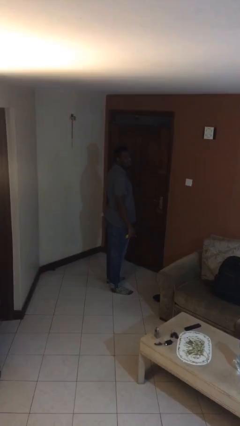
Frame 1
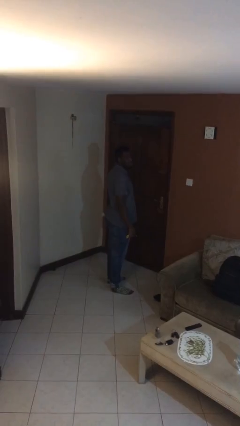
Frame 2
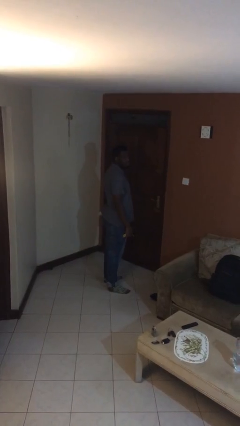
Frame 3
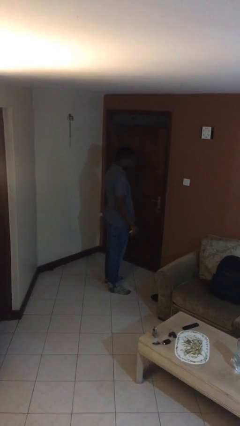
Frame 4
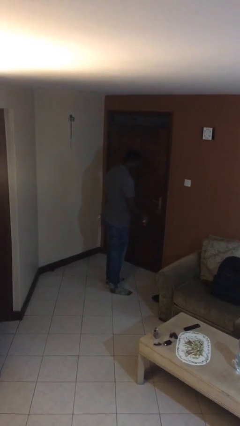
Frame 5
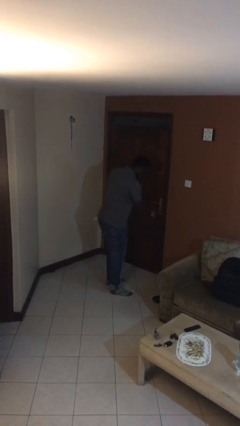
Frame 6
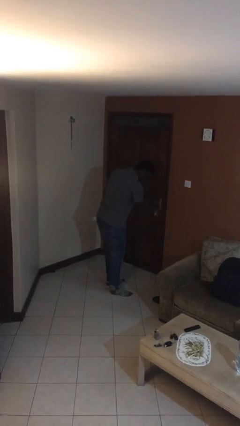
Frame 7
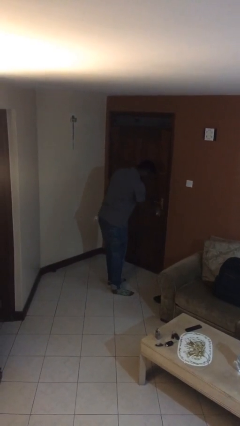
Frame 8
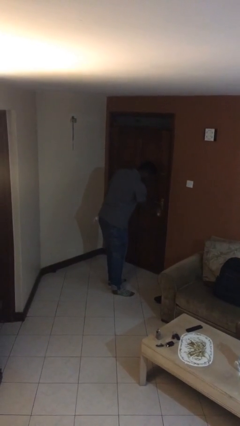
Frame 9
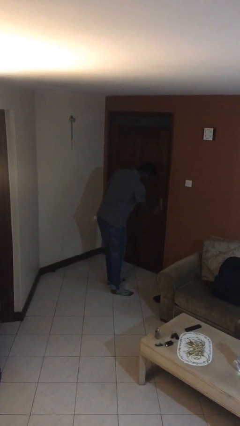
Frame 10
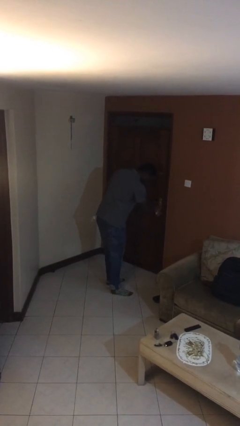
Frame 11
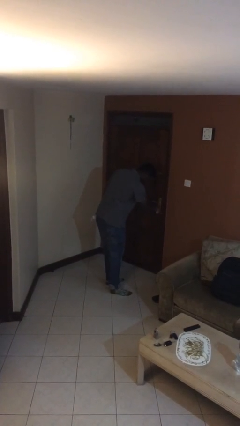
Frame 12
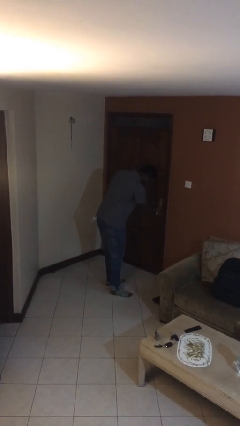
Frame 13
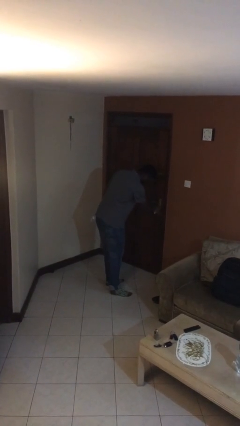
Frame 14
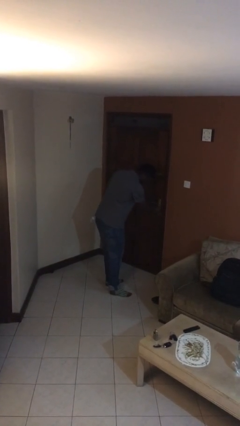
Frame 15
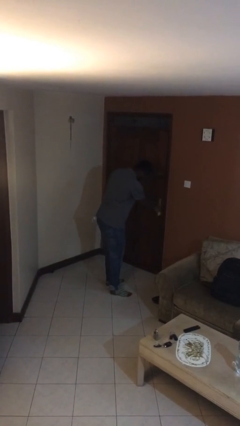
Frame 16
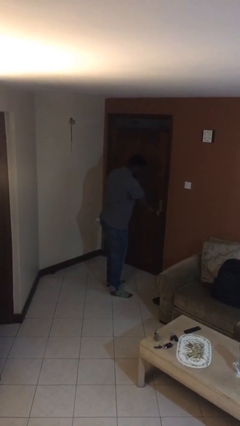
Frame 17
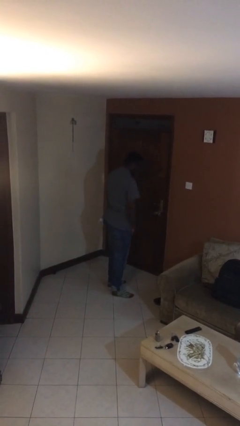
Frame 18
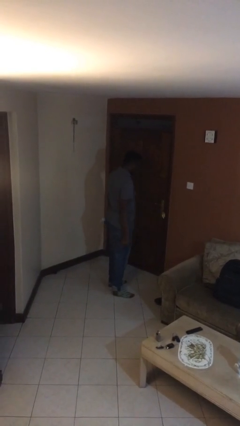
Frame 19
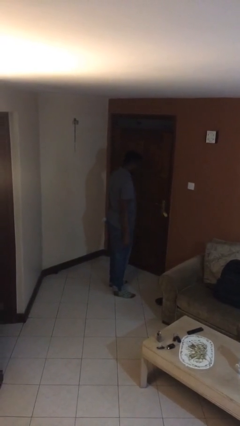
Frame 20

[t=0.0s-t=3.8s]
person unlocks door with keys

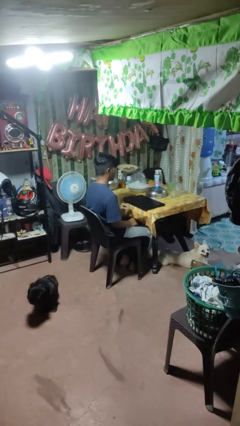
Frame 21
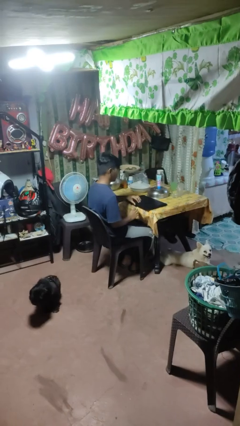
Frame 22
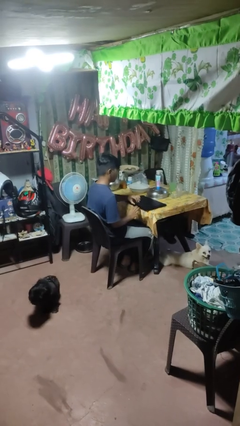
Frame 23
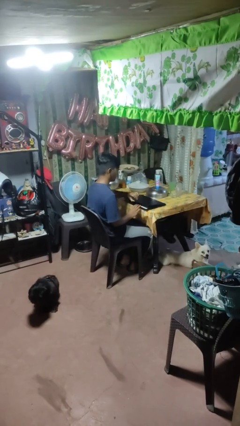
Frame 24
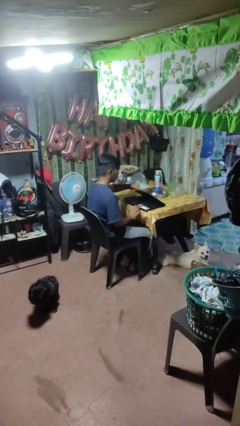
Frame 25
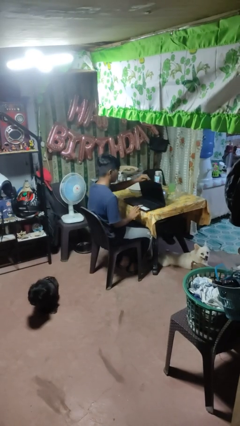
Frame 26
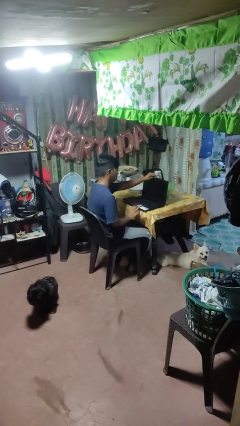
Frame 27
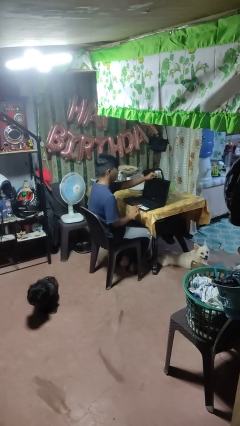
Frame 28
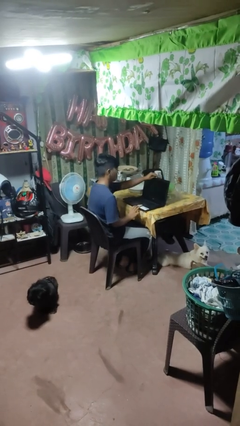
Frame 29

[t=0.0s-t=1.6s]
person opens laptop

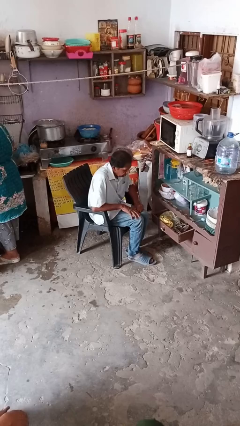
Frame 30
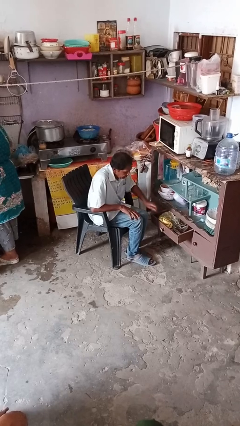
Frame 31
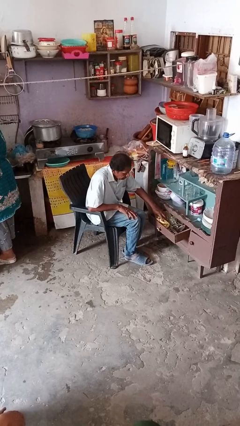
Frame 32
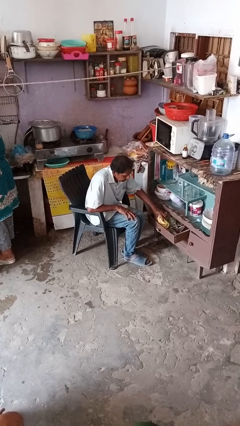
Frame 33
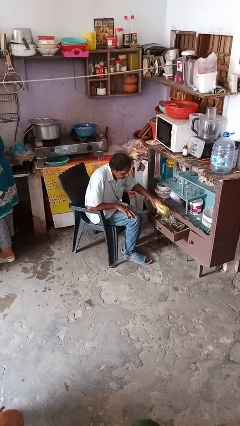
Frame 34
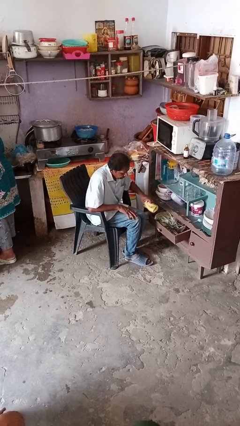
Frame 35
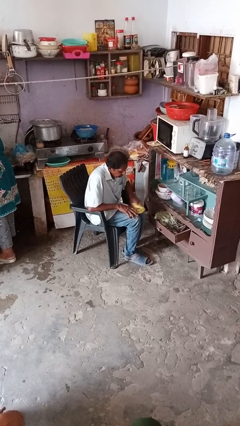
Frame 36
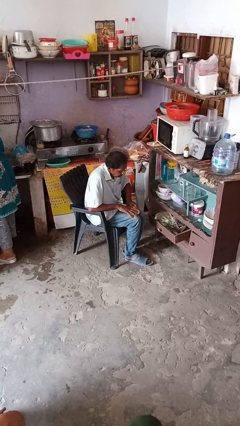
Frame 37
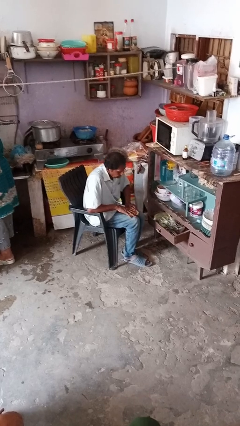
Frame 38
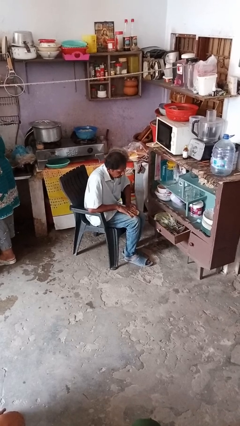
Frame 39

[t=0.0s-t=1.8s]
person takes clothes from dresser

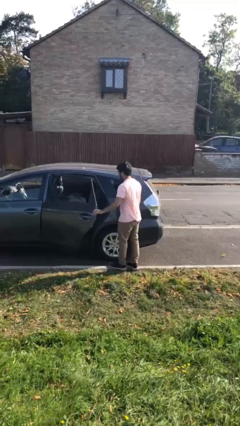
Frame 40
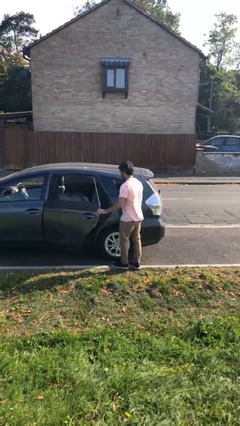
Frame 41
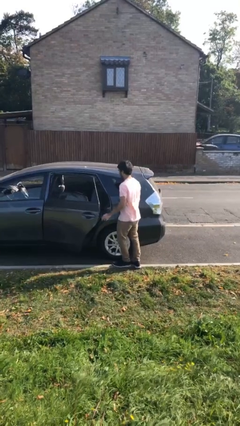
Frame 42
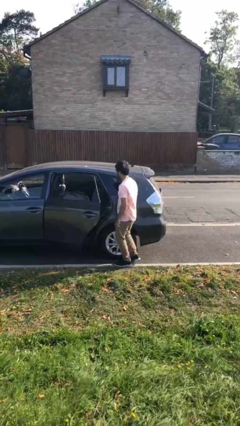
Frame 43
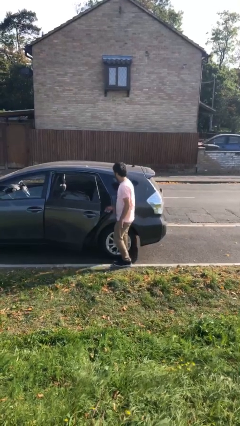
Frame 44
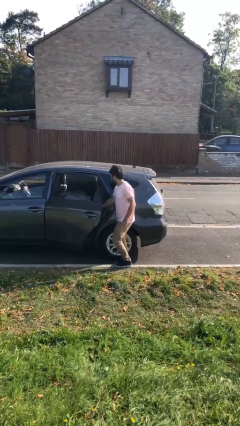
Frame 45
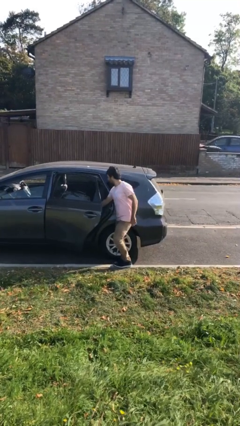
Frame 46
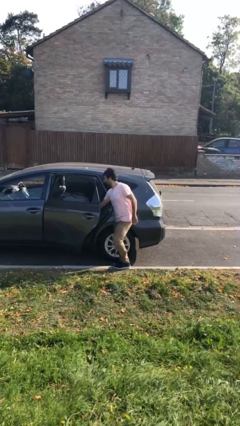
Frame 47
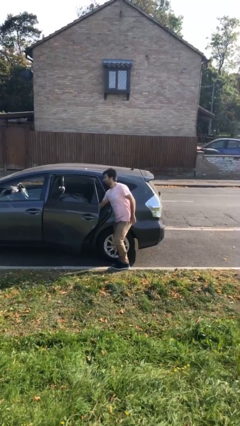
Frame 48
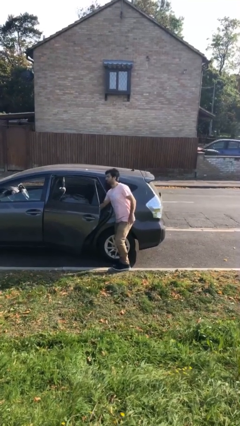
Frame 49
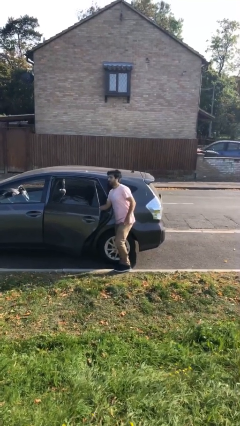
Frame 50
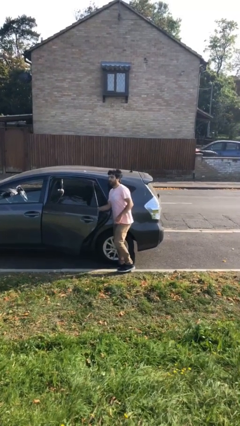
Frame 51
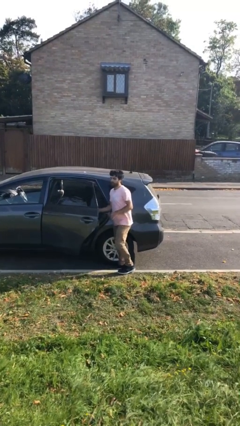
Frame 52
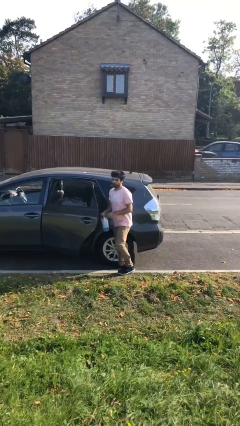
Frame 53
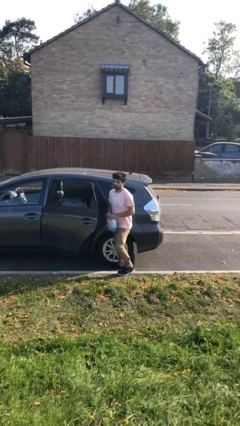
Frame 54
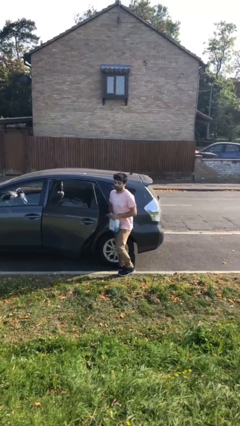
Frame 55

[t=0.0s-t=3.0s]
person unloads car

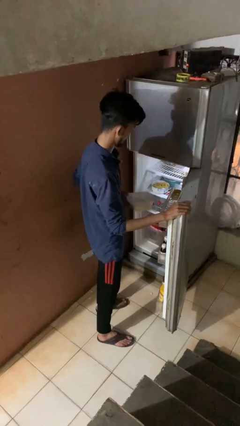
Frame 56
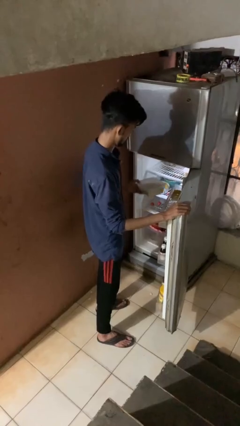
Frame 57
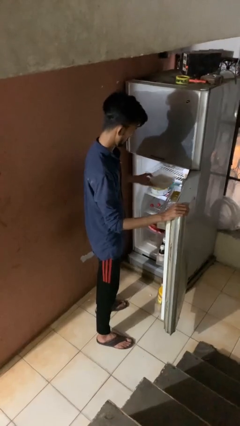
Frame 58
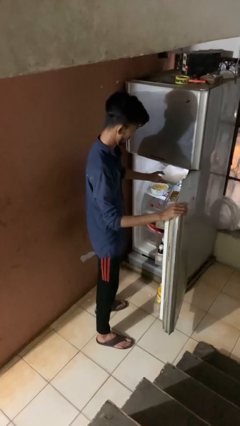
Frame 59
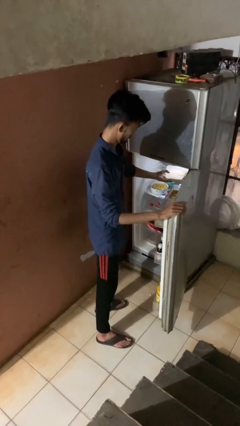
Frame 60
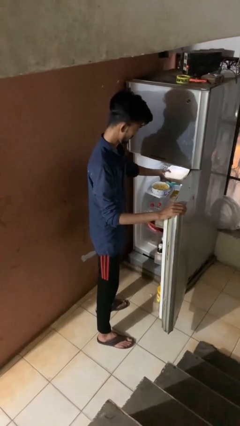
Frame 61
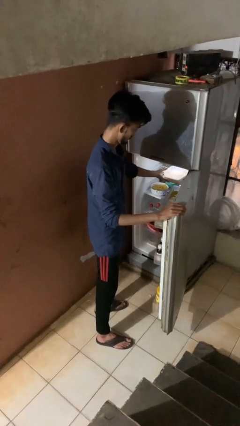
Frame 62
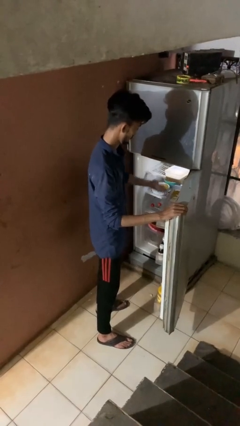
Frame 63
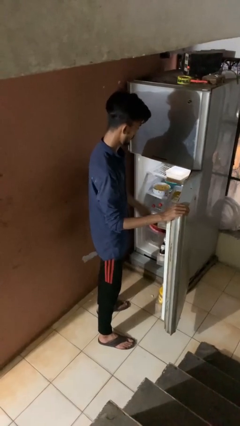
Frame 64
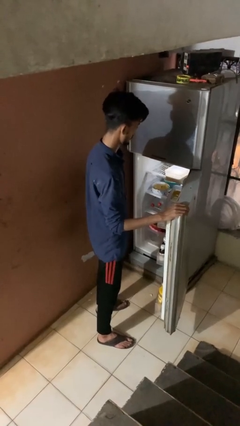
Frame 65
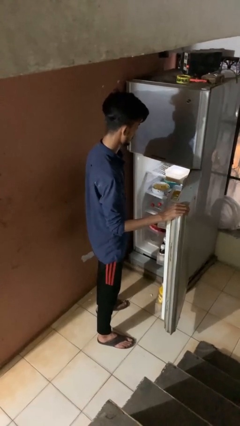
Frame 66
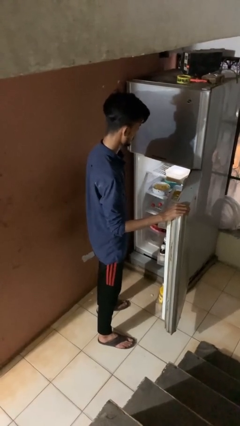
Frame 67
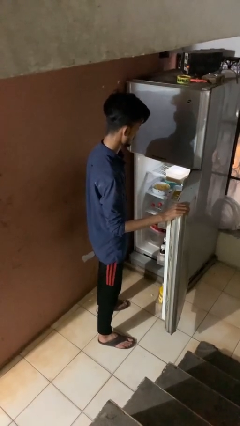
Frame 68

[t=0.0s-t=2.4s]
person loads groceries into refrigerator

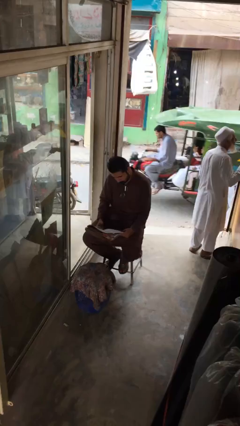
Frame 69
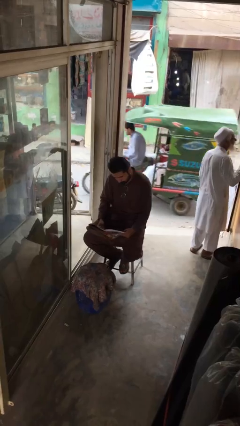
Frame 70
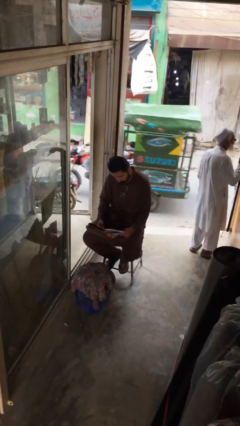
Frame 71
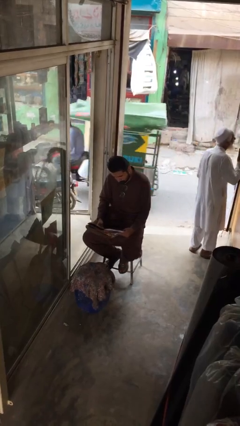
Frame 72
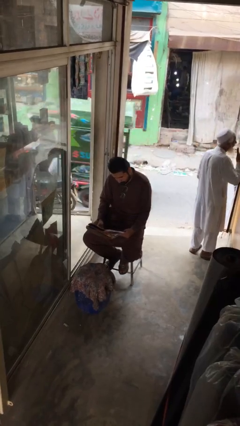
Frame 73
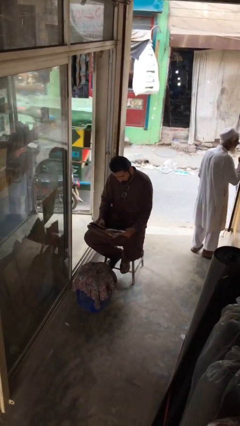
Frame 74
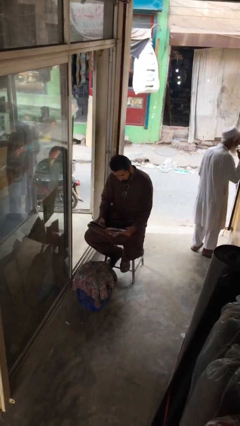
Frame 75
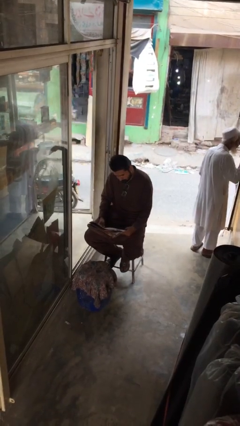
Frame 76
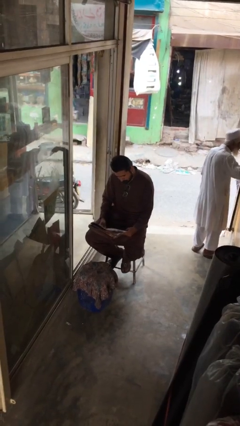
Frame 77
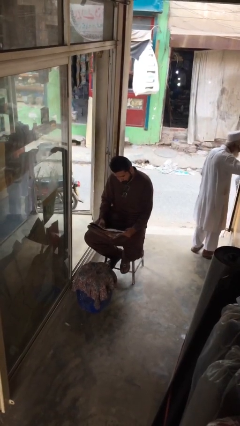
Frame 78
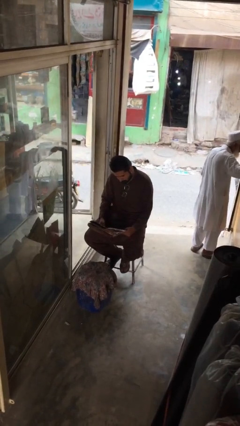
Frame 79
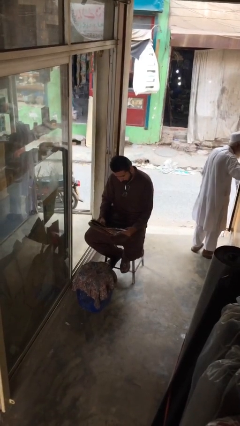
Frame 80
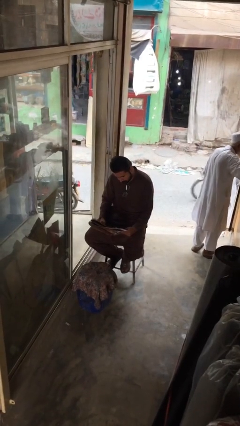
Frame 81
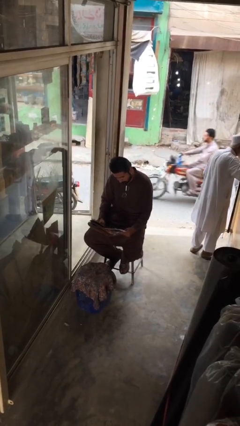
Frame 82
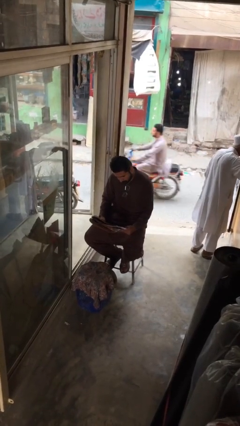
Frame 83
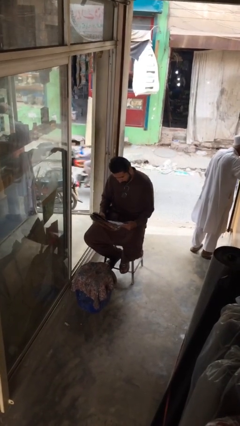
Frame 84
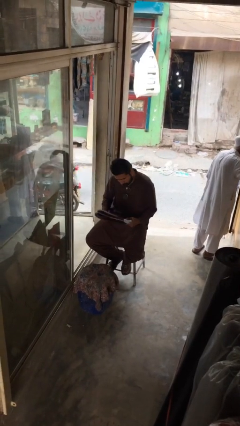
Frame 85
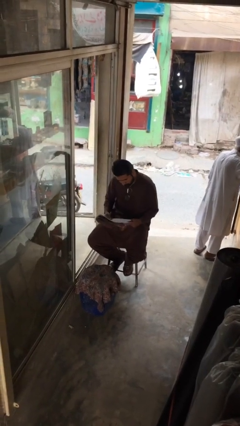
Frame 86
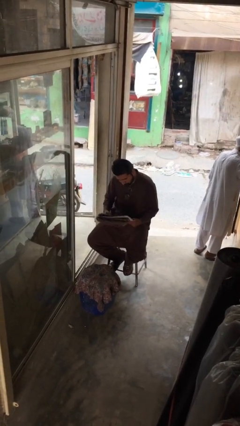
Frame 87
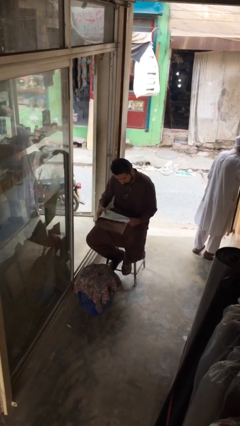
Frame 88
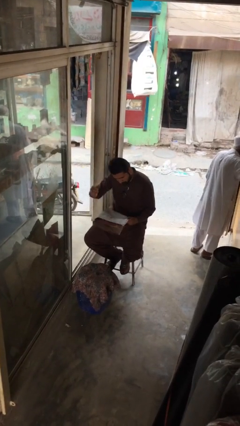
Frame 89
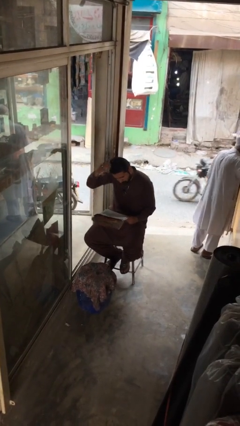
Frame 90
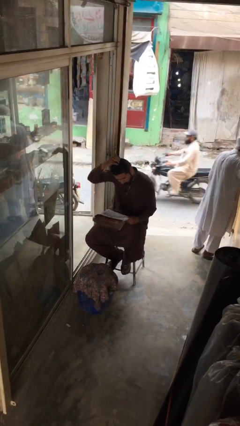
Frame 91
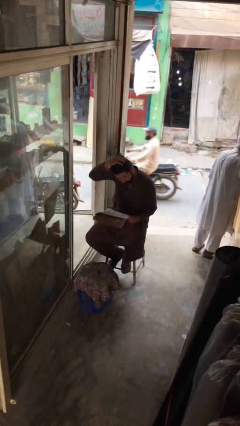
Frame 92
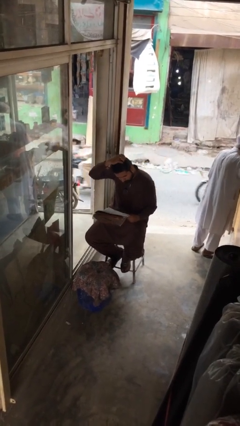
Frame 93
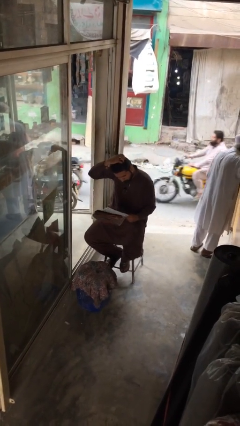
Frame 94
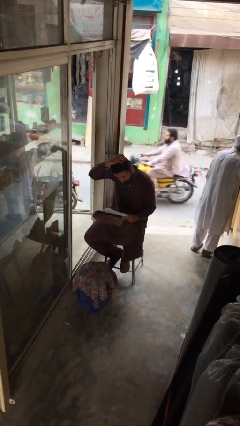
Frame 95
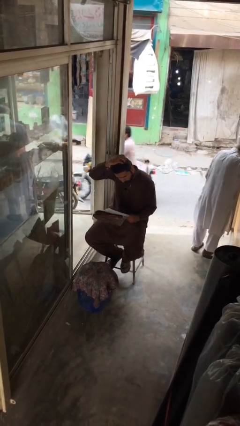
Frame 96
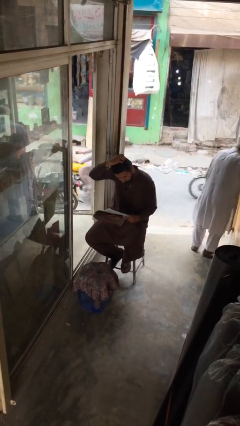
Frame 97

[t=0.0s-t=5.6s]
person reads document
